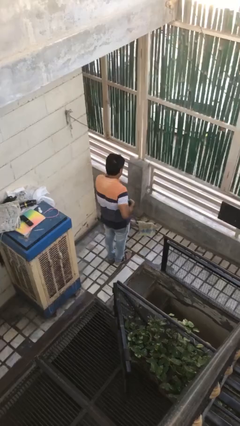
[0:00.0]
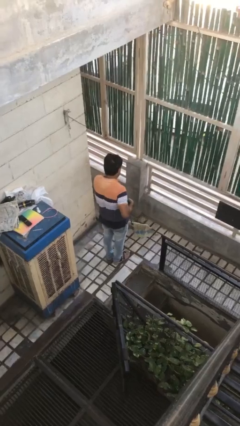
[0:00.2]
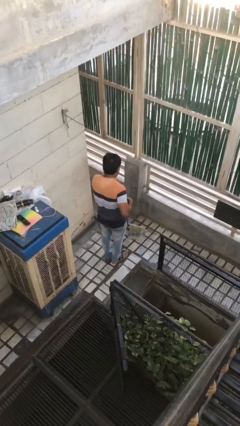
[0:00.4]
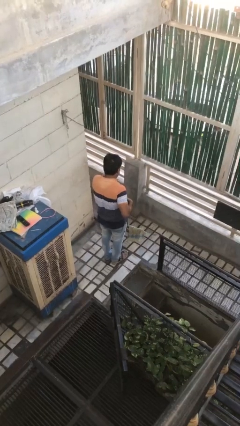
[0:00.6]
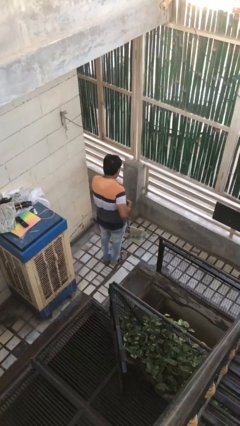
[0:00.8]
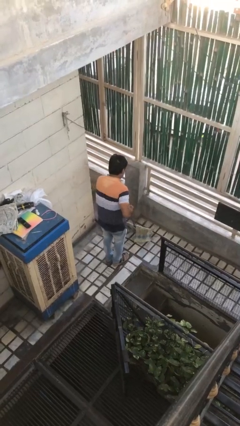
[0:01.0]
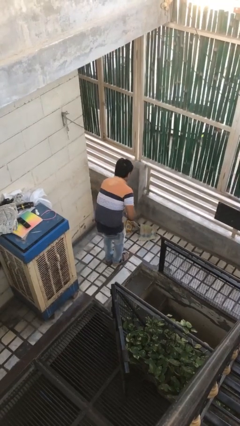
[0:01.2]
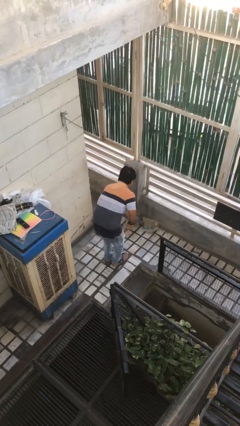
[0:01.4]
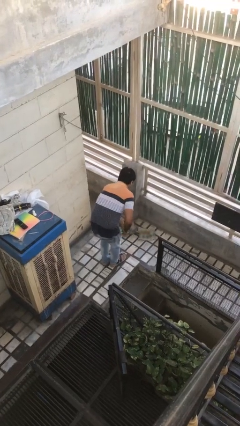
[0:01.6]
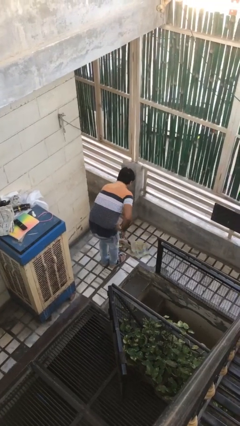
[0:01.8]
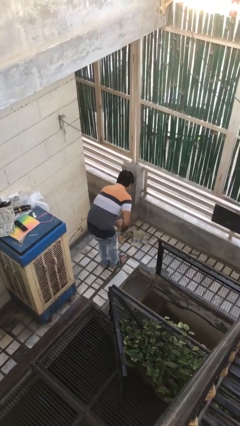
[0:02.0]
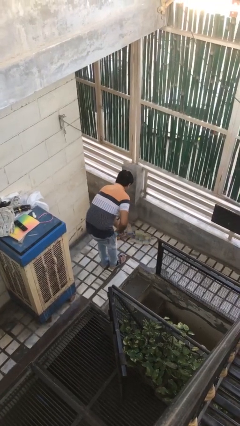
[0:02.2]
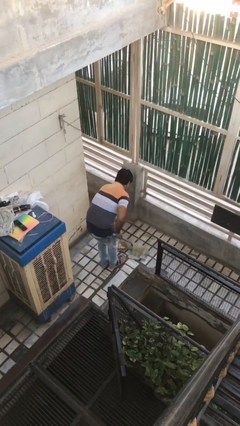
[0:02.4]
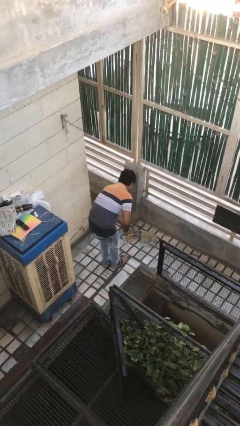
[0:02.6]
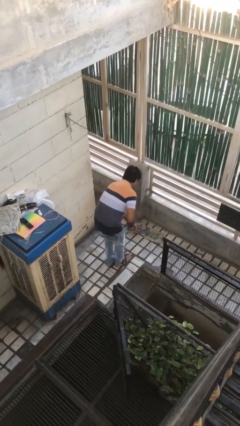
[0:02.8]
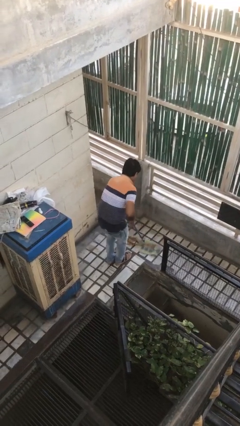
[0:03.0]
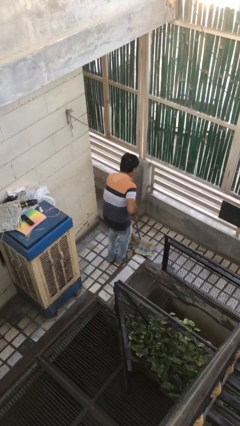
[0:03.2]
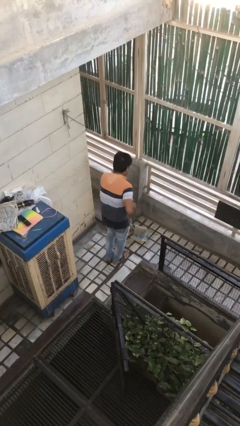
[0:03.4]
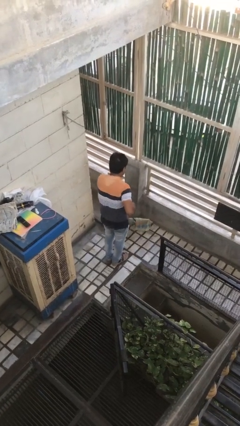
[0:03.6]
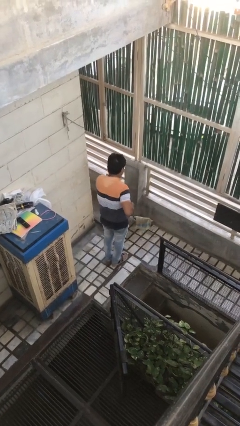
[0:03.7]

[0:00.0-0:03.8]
person mops

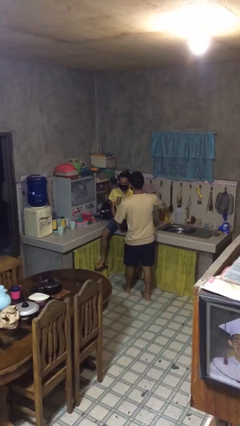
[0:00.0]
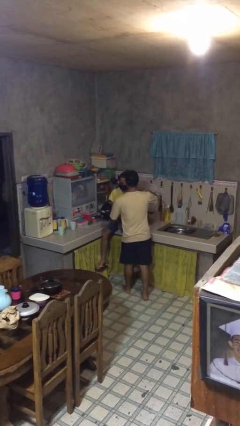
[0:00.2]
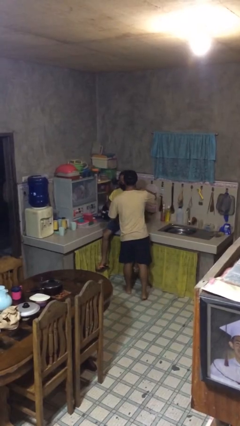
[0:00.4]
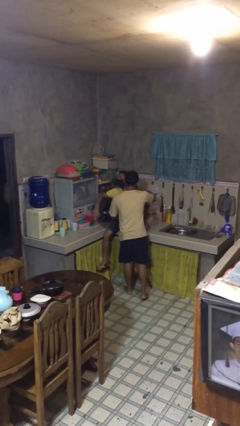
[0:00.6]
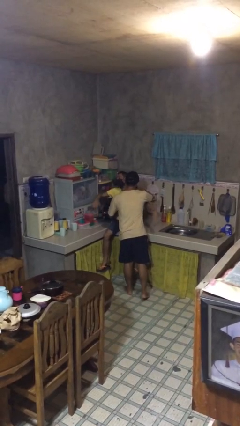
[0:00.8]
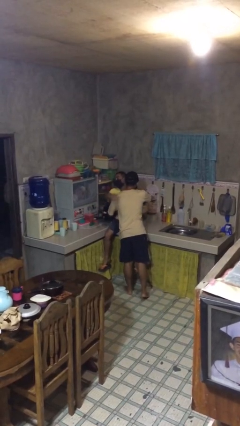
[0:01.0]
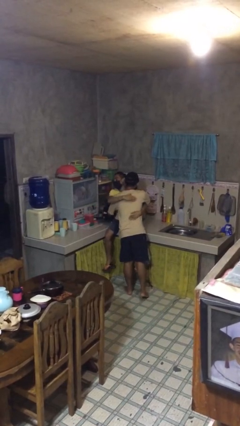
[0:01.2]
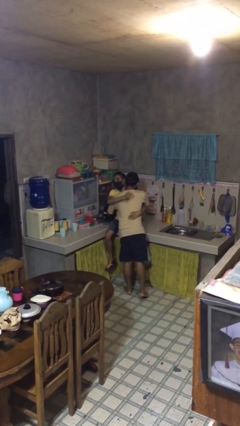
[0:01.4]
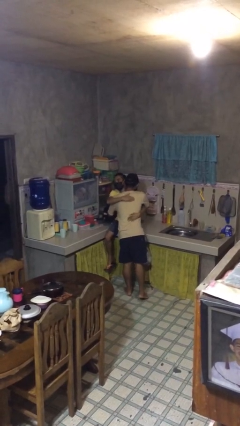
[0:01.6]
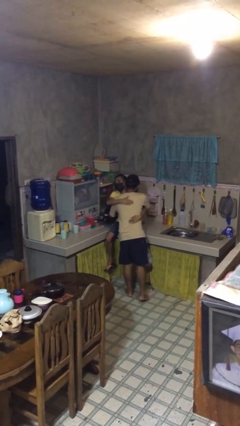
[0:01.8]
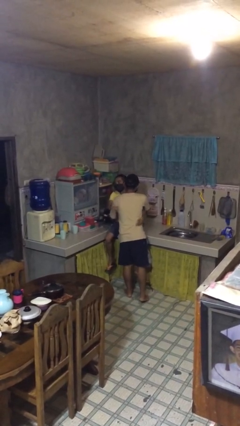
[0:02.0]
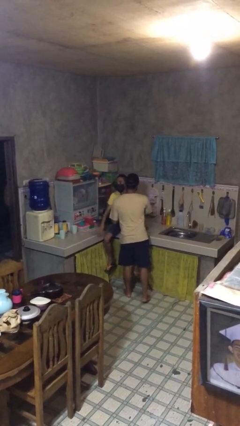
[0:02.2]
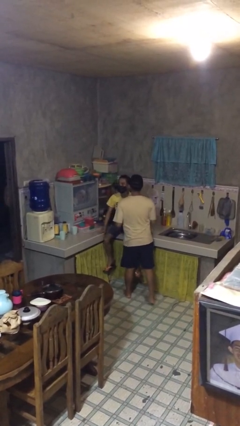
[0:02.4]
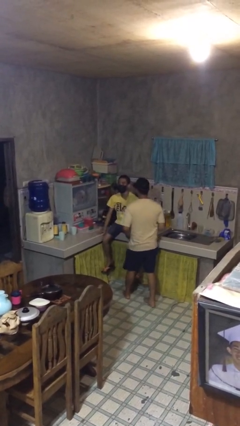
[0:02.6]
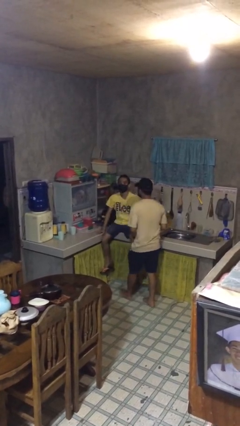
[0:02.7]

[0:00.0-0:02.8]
person embraces person

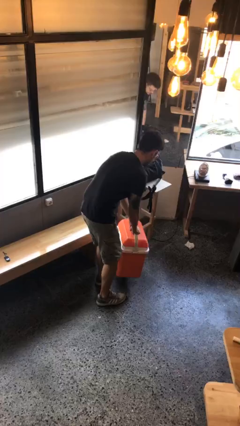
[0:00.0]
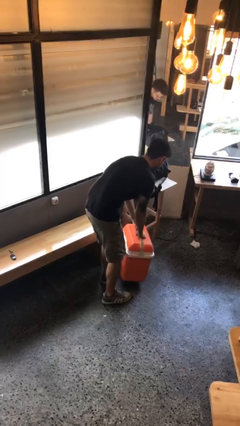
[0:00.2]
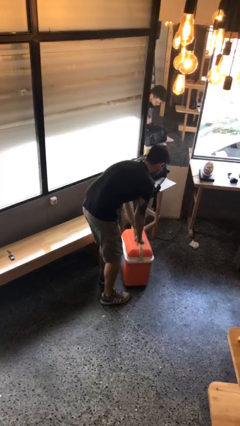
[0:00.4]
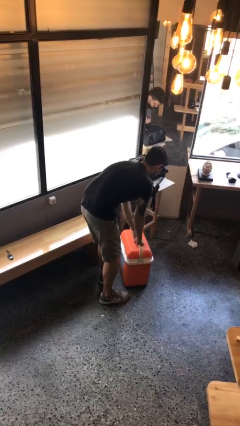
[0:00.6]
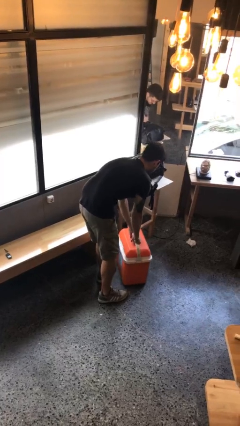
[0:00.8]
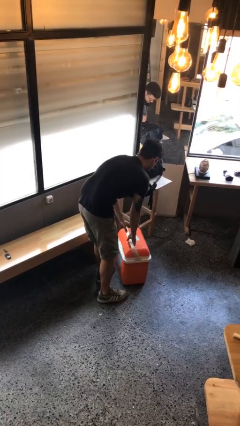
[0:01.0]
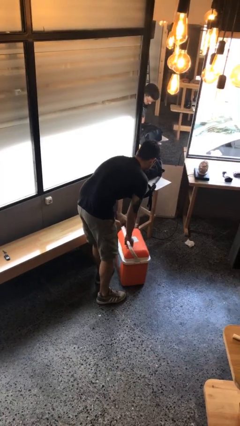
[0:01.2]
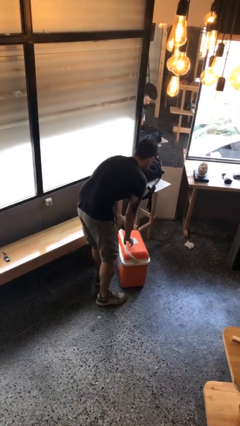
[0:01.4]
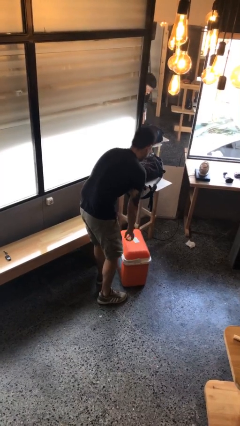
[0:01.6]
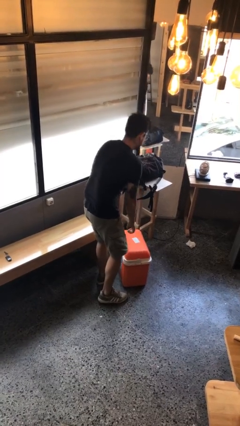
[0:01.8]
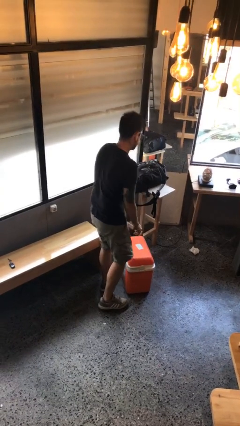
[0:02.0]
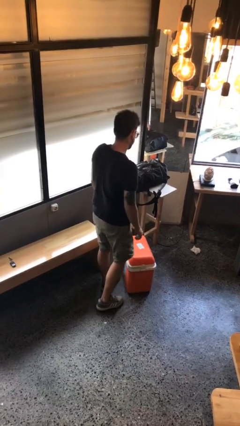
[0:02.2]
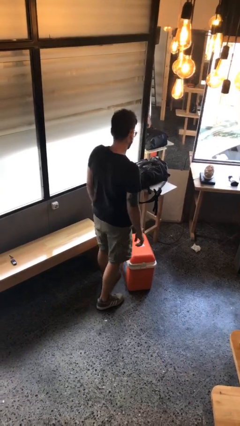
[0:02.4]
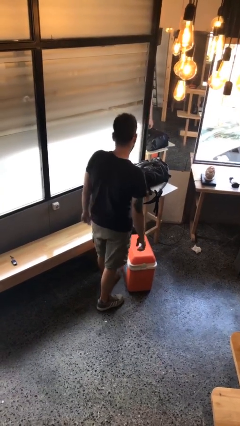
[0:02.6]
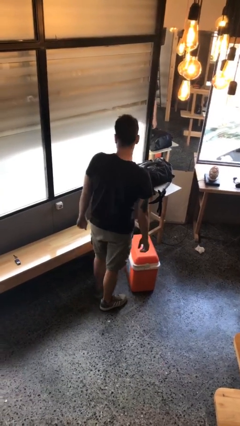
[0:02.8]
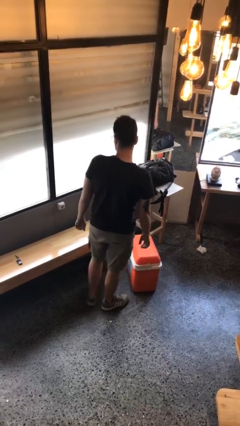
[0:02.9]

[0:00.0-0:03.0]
person puts down object on floor

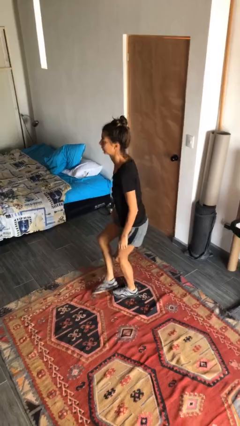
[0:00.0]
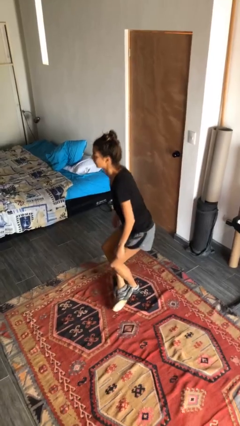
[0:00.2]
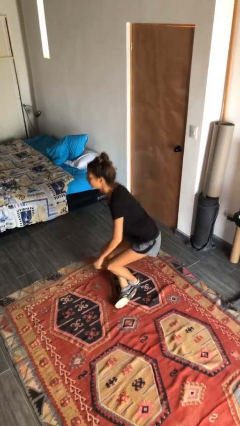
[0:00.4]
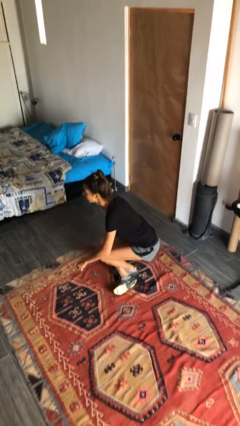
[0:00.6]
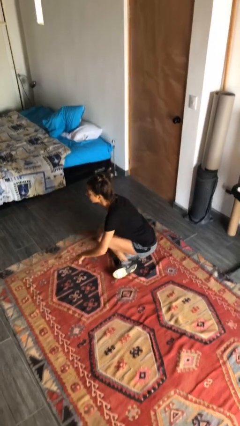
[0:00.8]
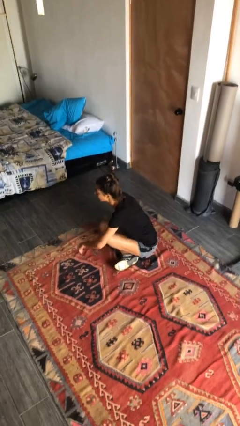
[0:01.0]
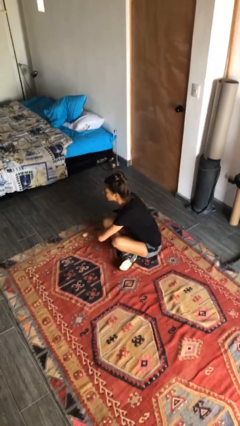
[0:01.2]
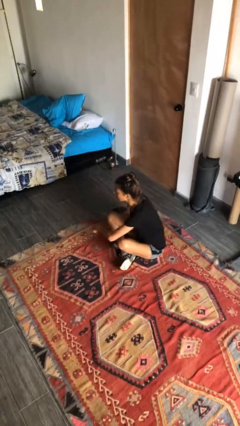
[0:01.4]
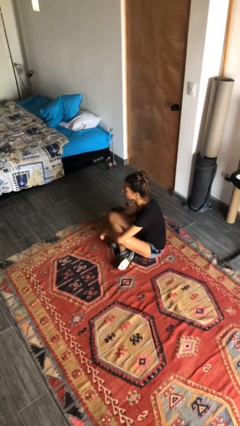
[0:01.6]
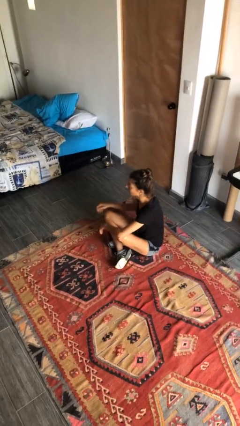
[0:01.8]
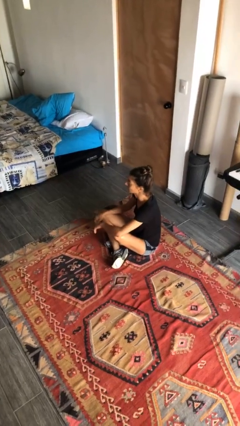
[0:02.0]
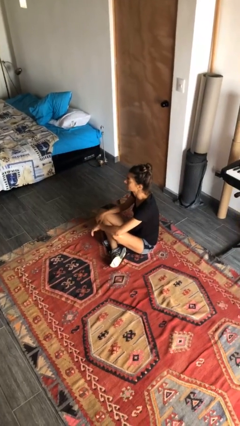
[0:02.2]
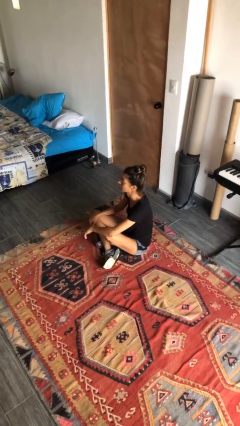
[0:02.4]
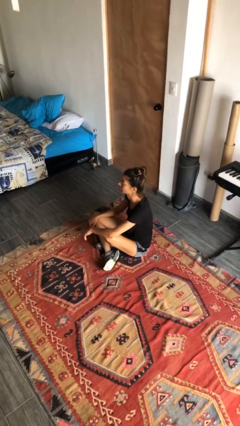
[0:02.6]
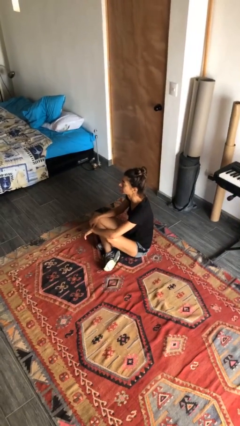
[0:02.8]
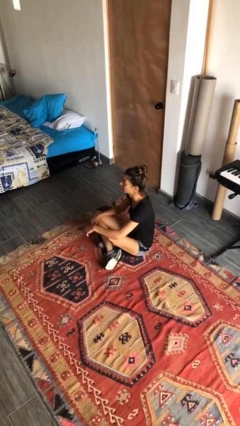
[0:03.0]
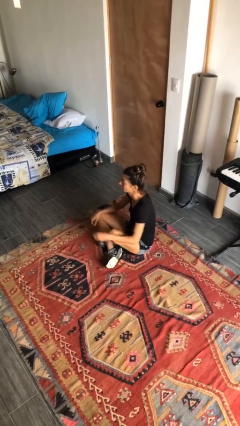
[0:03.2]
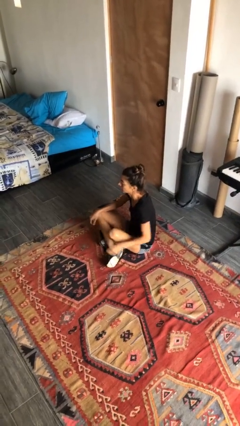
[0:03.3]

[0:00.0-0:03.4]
person sits crisscross

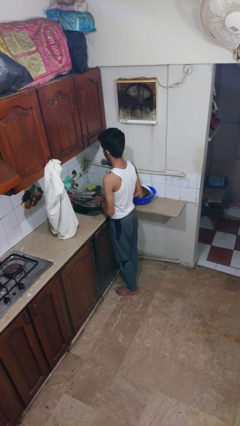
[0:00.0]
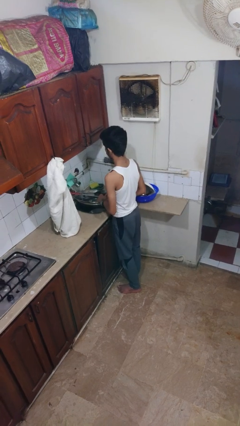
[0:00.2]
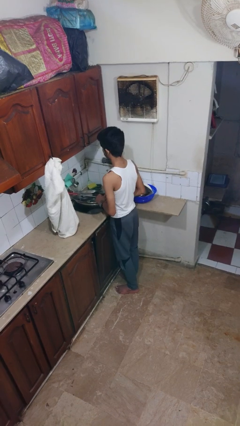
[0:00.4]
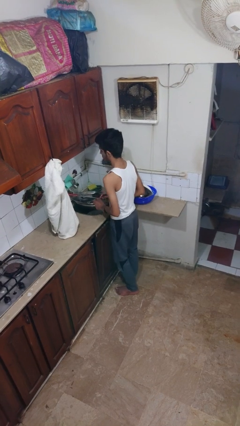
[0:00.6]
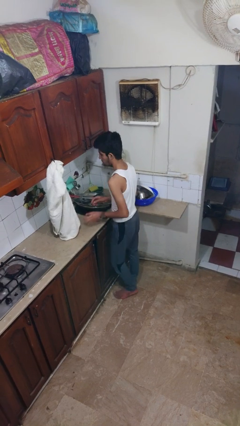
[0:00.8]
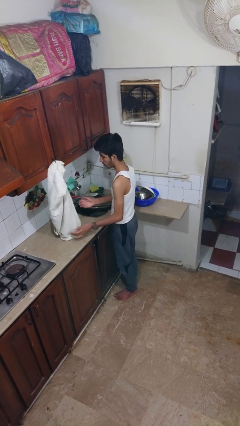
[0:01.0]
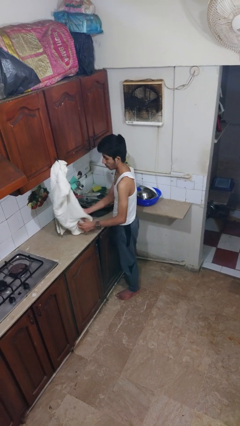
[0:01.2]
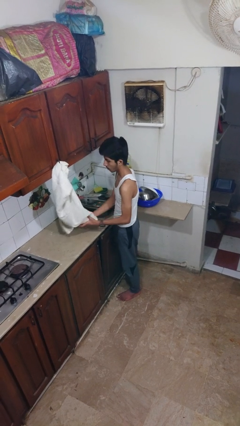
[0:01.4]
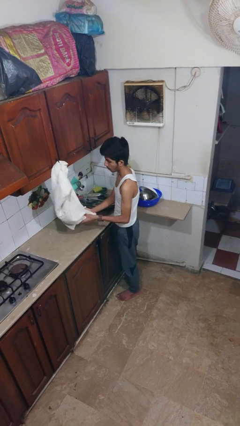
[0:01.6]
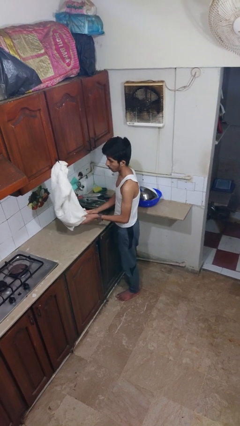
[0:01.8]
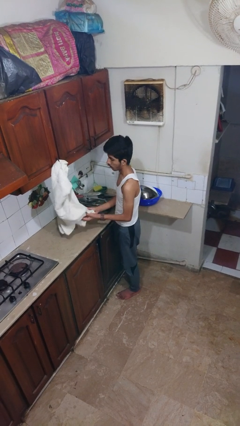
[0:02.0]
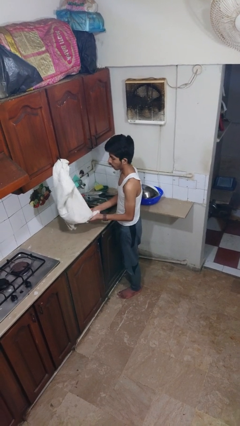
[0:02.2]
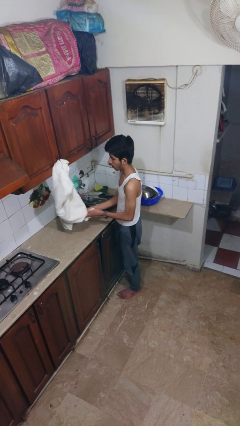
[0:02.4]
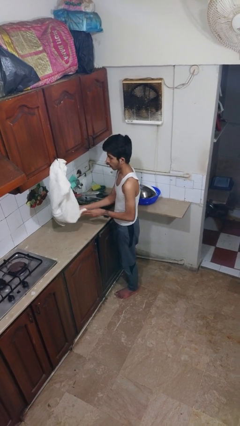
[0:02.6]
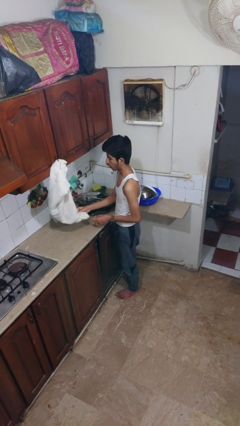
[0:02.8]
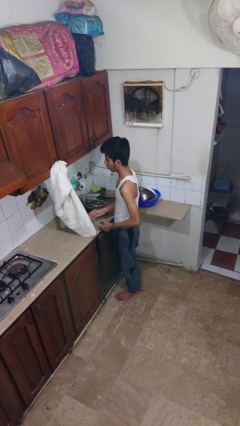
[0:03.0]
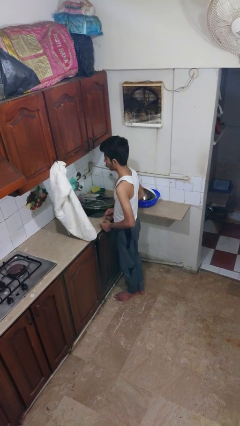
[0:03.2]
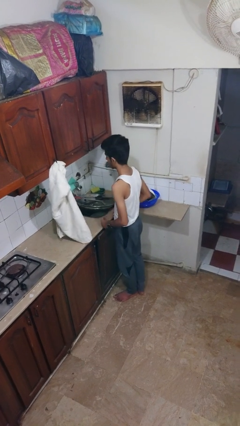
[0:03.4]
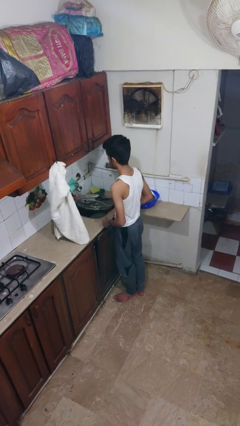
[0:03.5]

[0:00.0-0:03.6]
person dries hands with towel

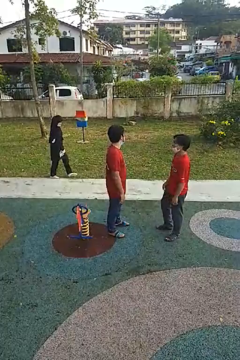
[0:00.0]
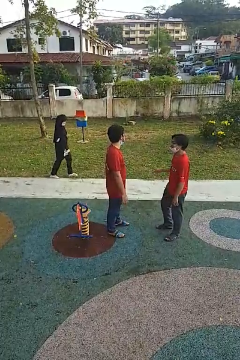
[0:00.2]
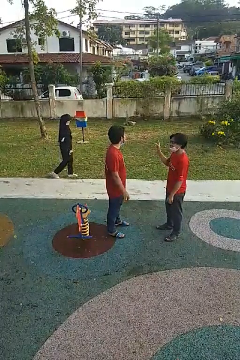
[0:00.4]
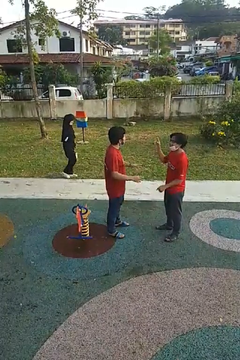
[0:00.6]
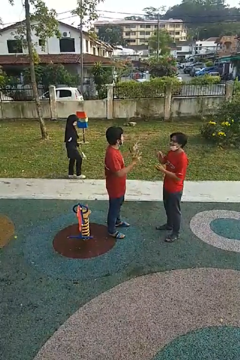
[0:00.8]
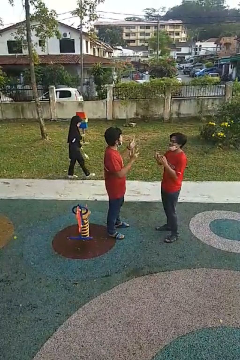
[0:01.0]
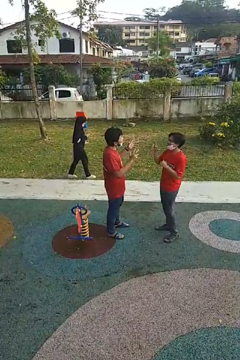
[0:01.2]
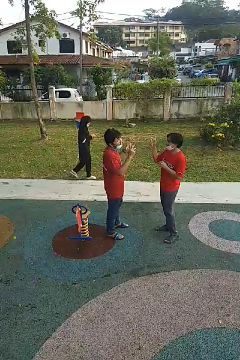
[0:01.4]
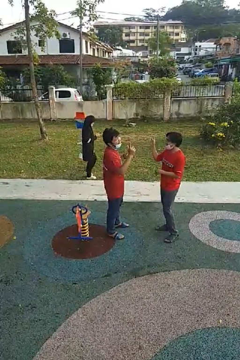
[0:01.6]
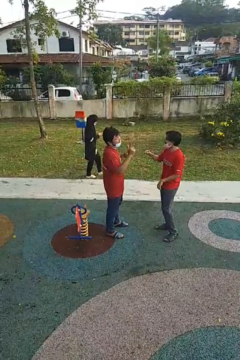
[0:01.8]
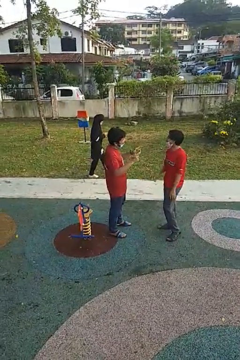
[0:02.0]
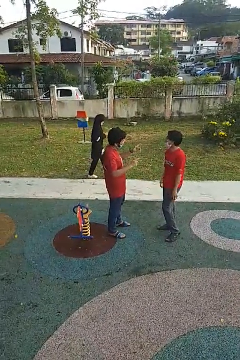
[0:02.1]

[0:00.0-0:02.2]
person talks to person
